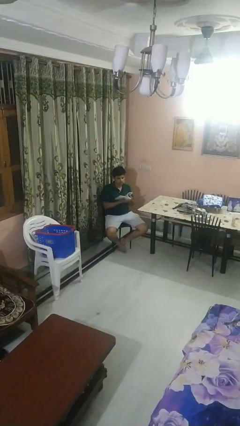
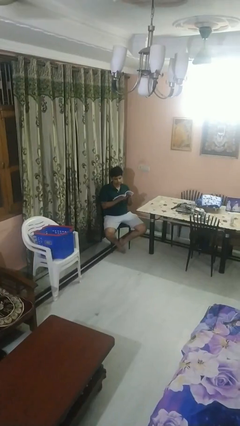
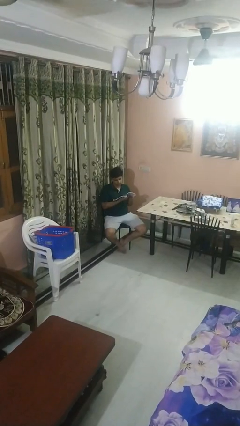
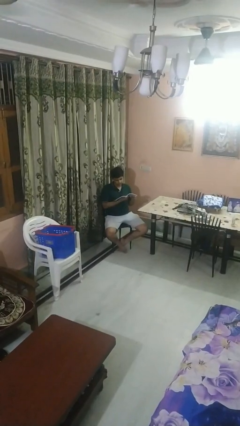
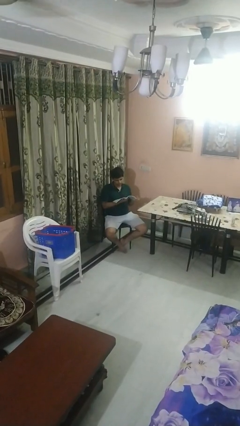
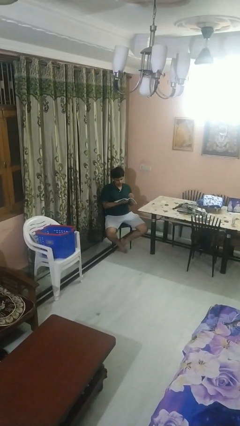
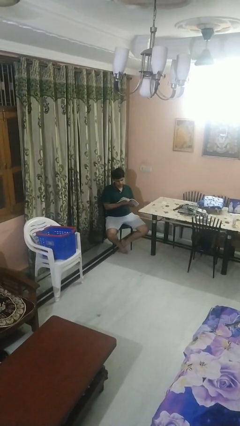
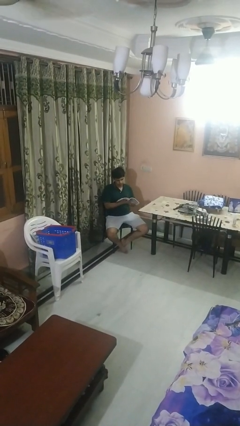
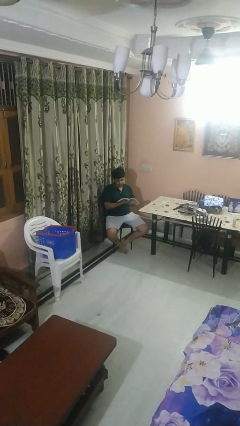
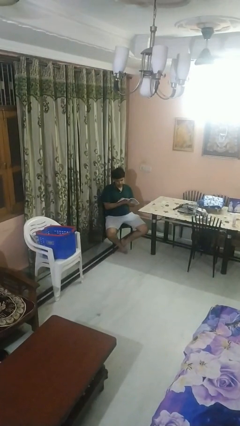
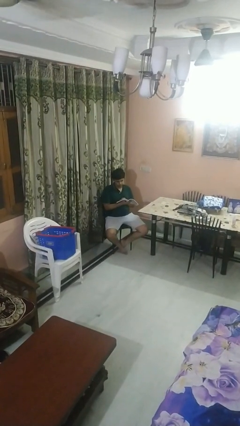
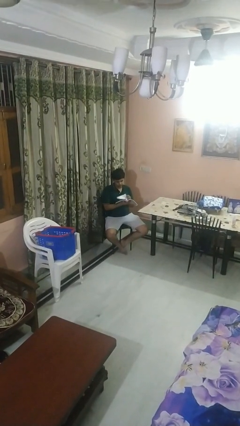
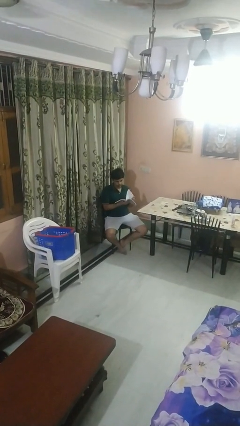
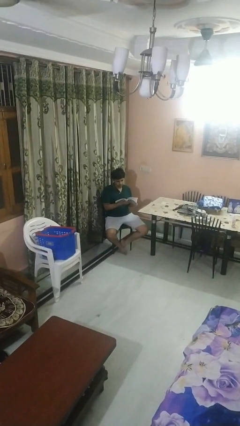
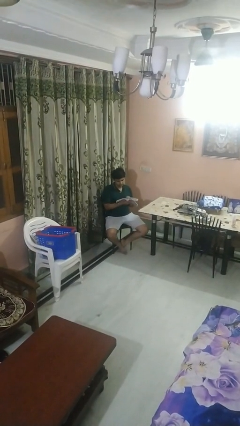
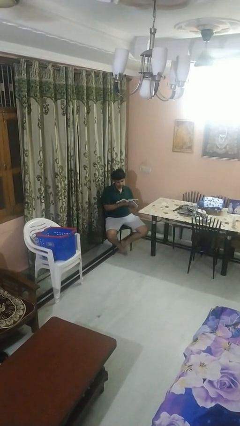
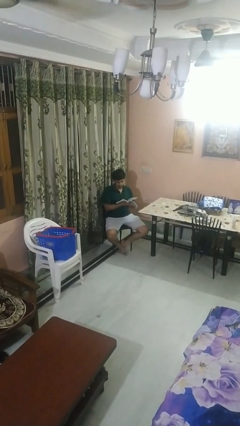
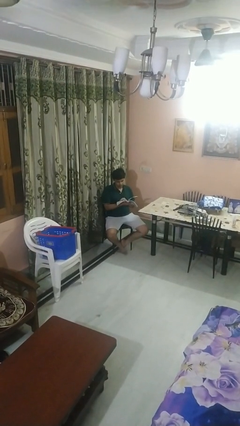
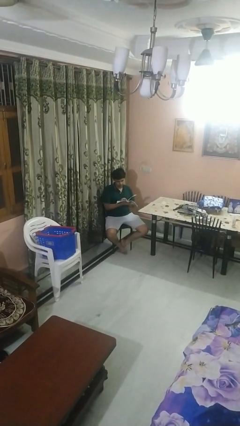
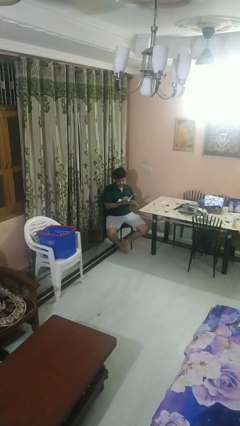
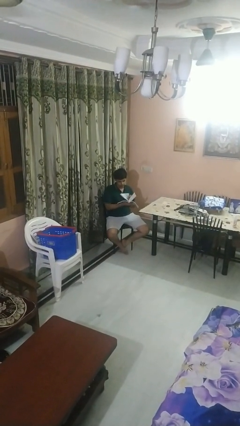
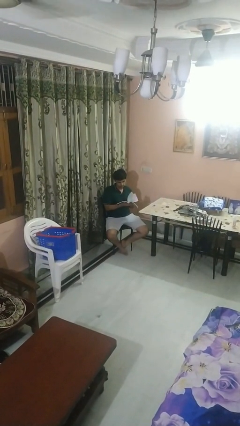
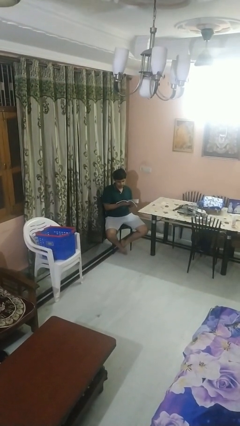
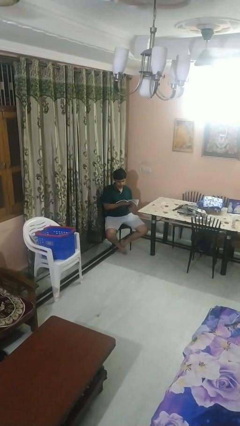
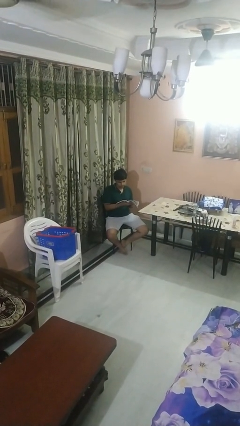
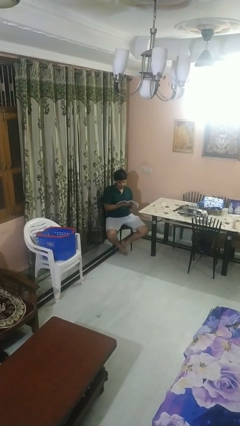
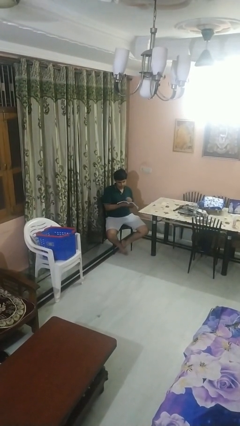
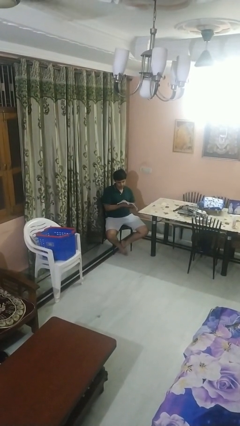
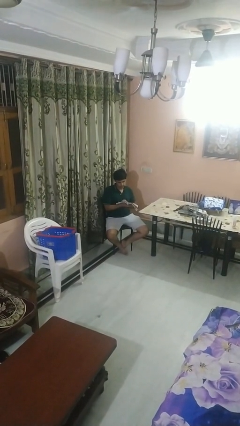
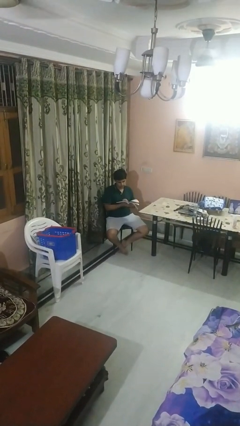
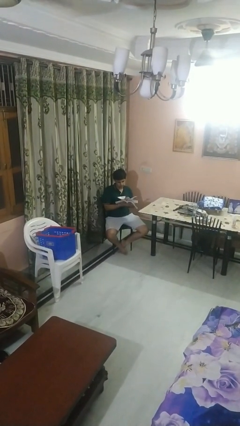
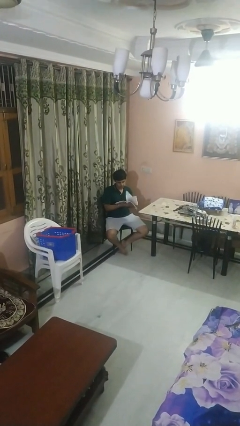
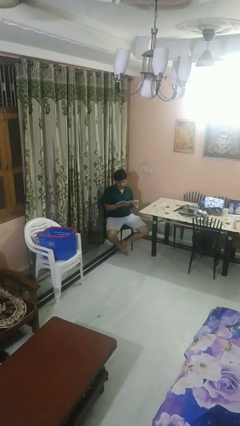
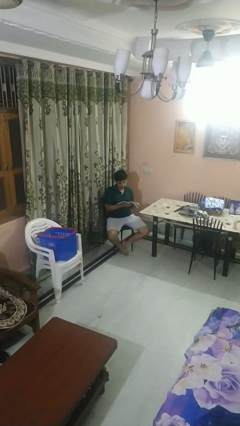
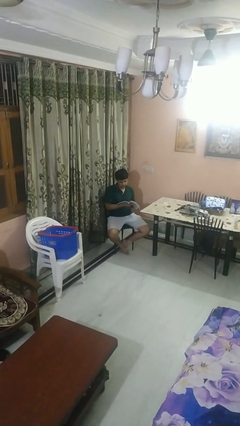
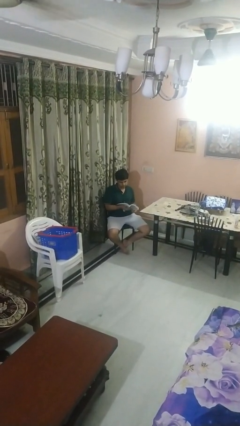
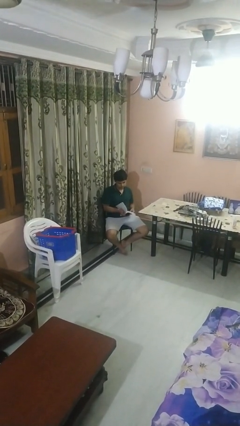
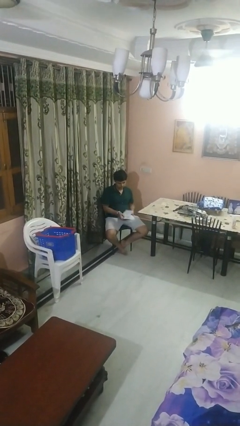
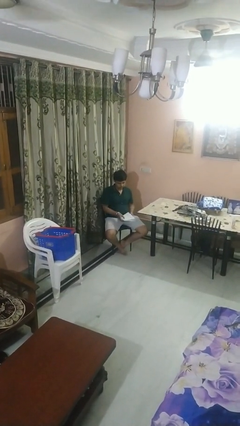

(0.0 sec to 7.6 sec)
person reads magazine

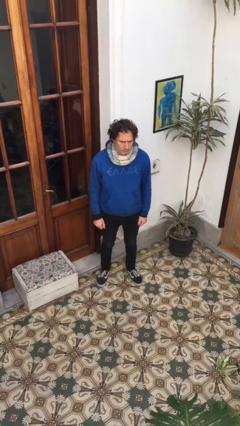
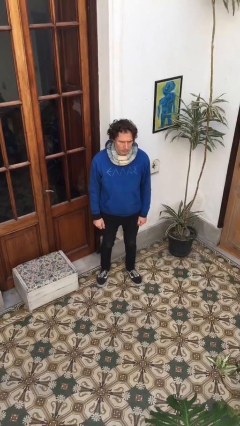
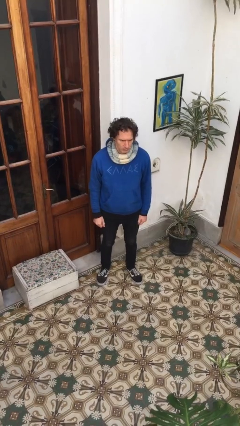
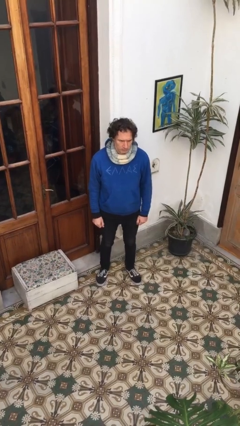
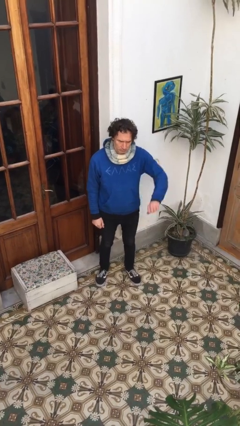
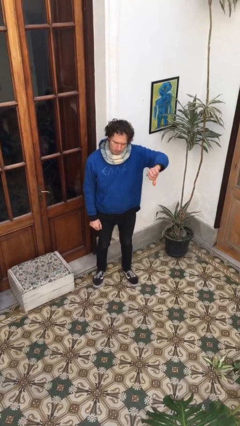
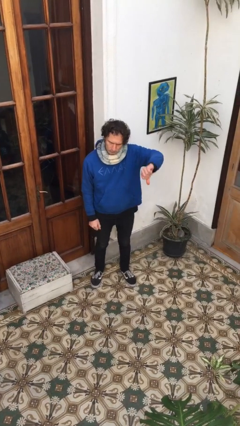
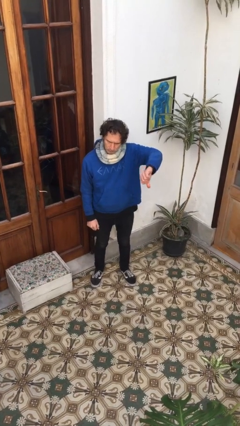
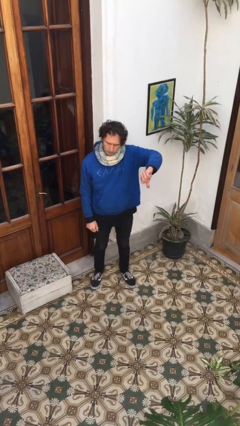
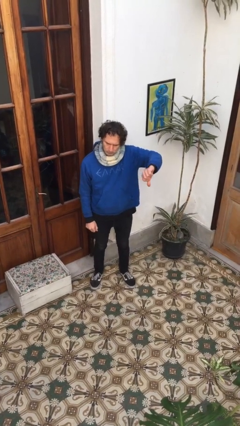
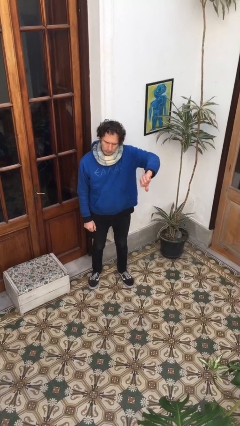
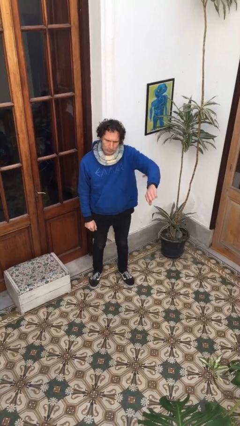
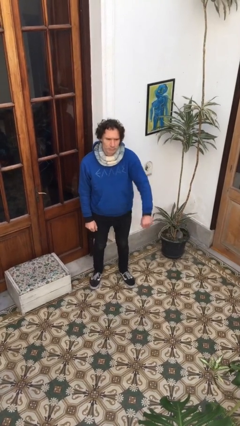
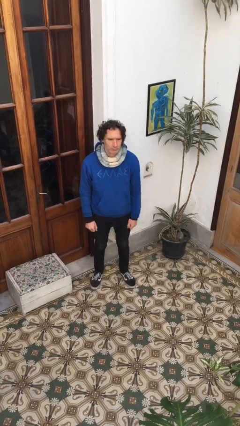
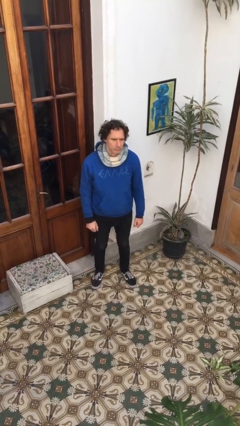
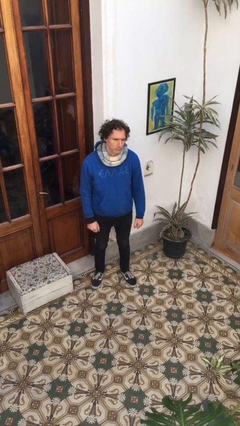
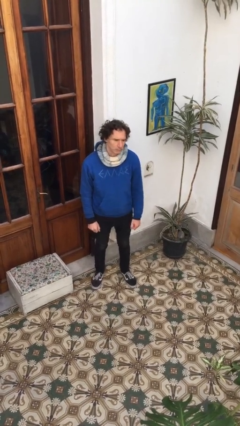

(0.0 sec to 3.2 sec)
person gestures thumbs down

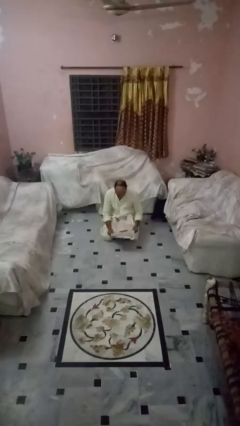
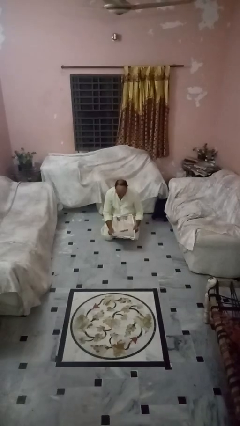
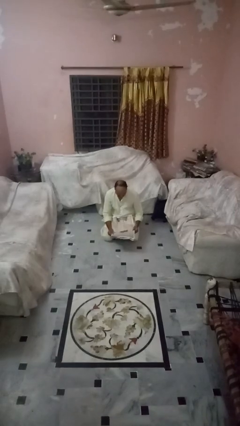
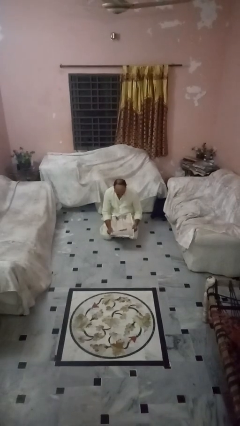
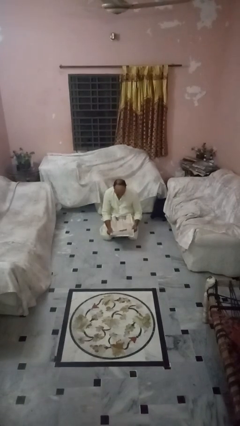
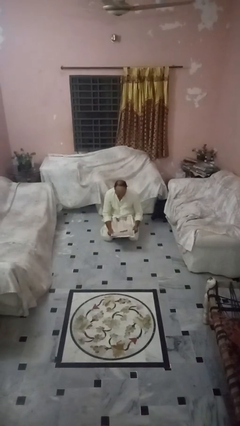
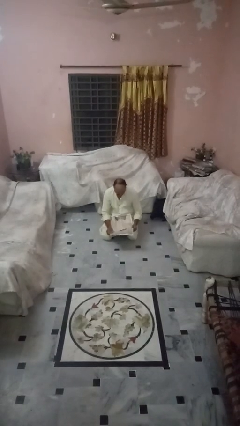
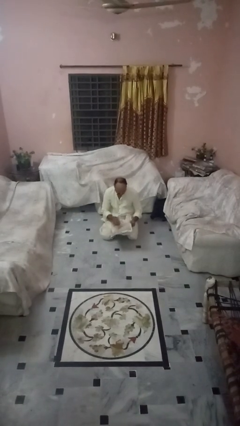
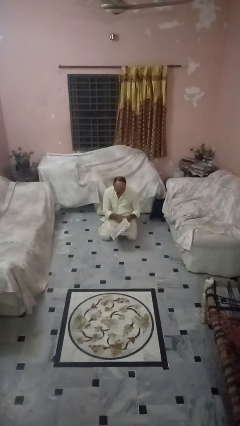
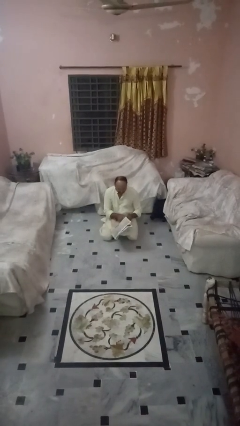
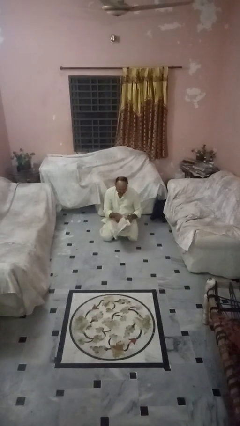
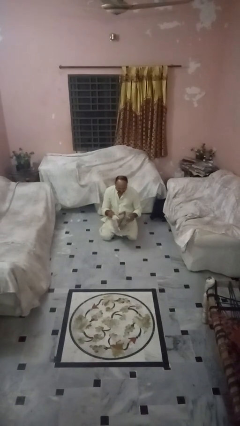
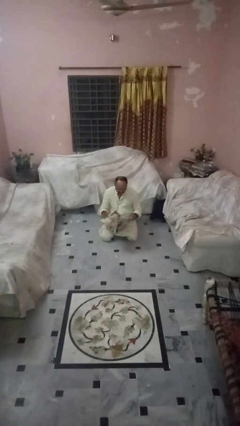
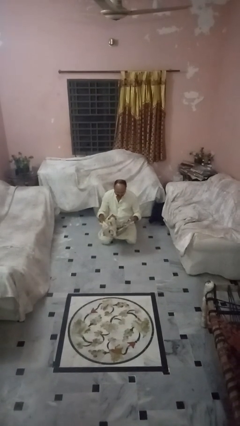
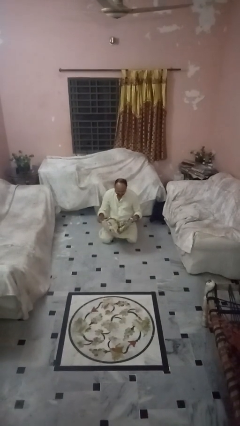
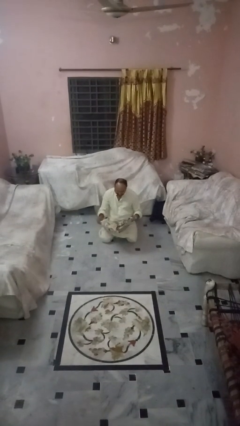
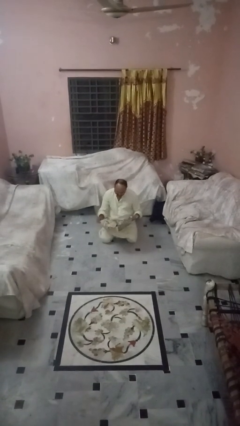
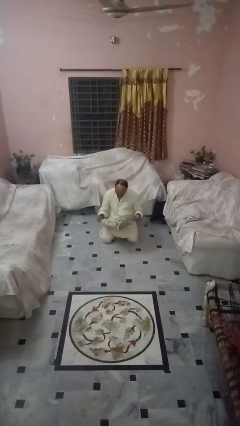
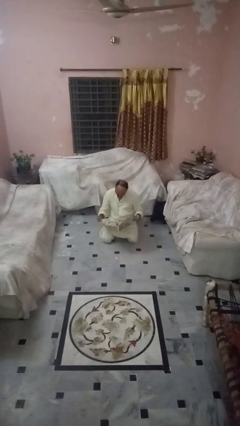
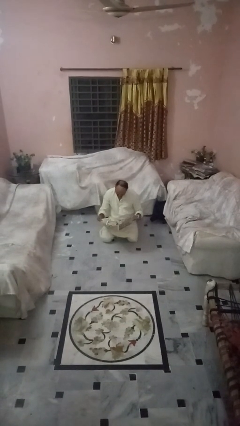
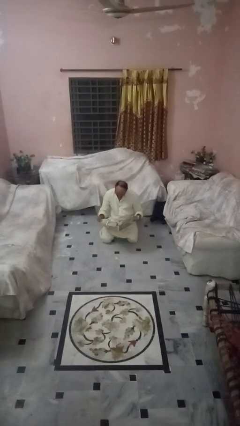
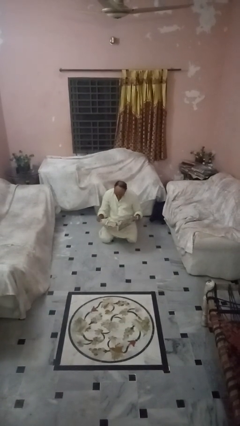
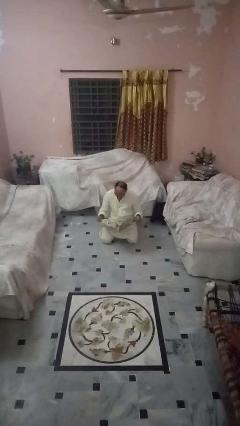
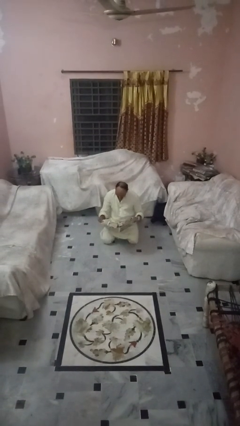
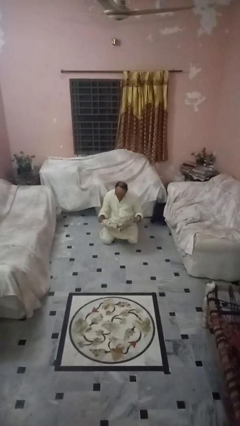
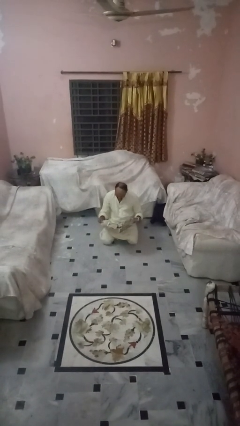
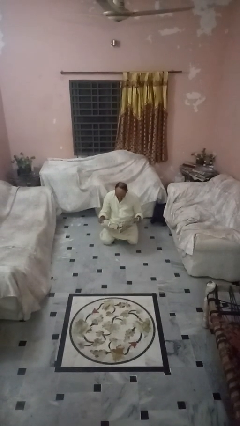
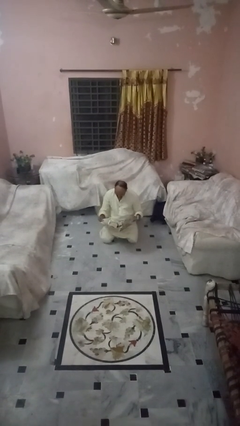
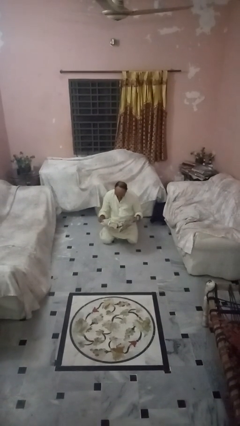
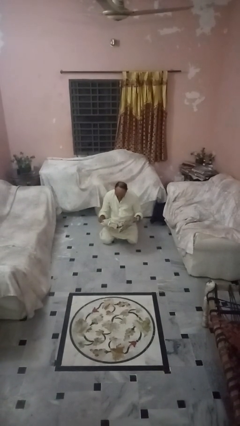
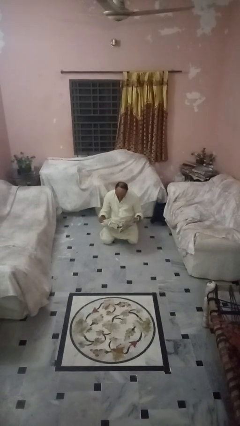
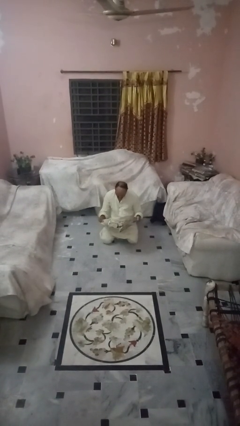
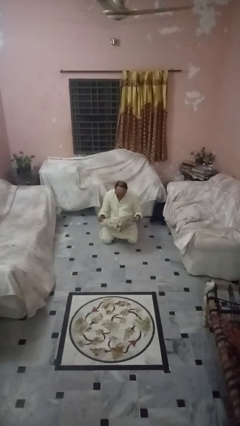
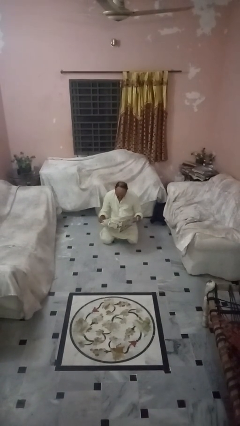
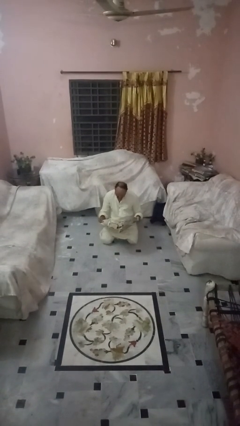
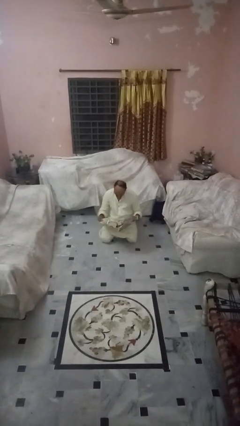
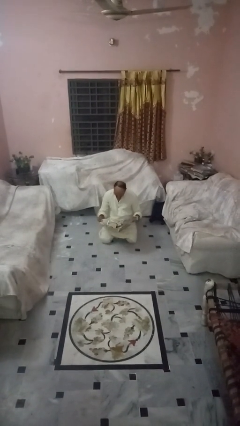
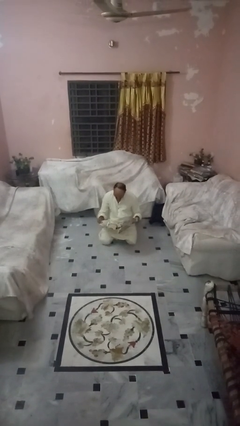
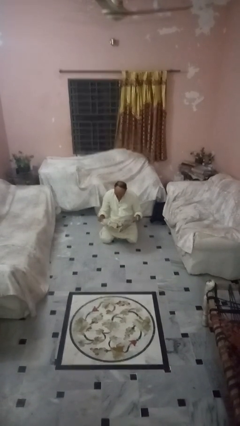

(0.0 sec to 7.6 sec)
person reads newspaper
